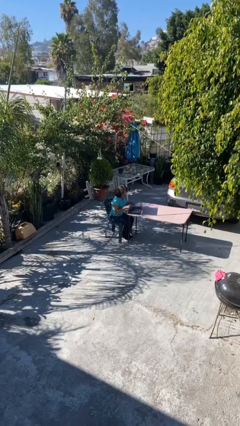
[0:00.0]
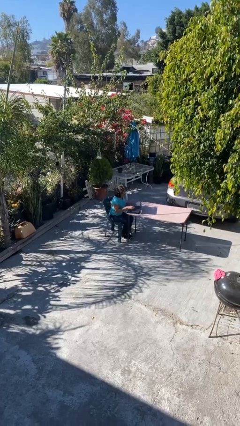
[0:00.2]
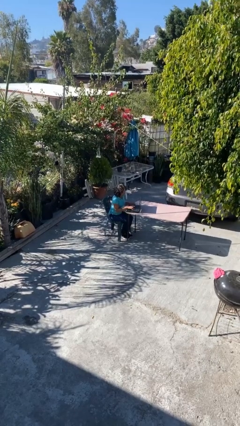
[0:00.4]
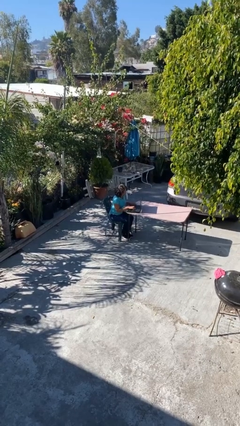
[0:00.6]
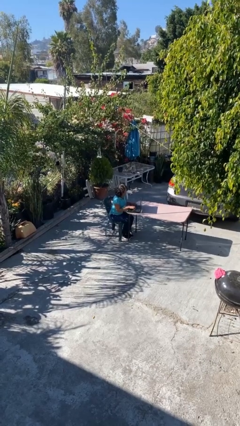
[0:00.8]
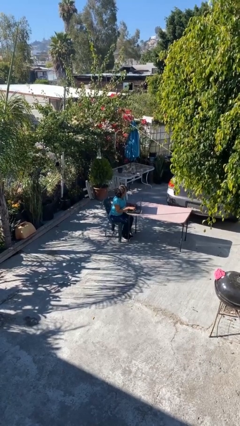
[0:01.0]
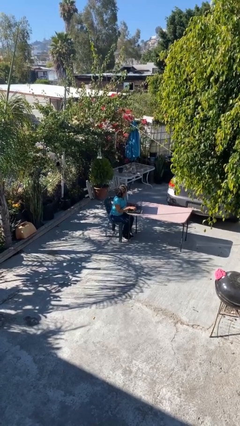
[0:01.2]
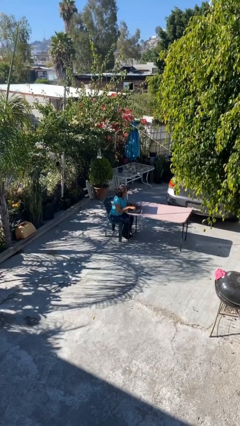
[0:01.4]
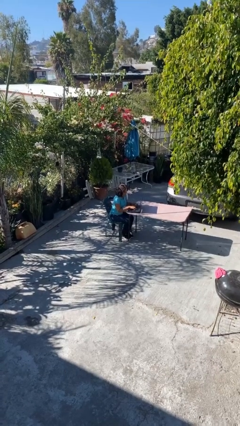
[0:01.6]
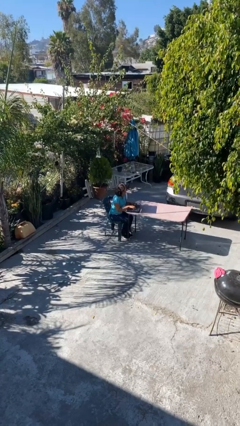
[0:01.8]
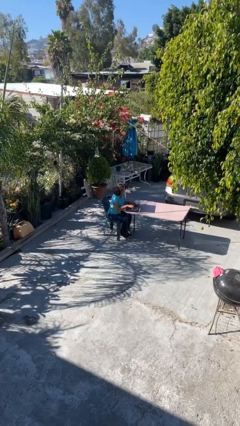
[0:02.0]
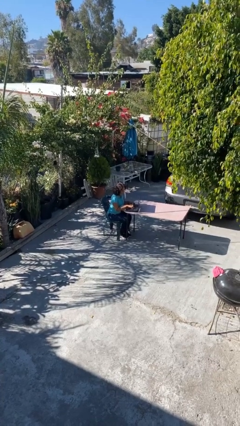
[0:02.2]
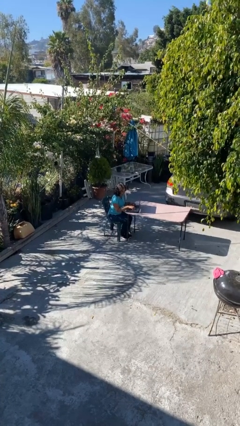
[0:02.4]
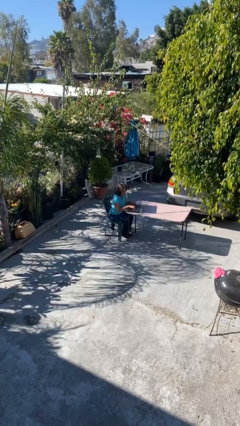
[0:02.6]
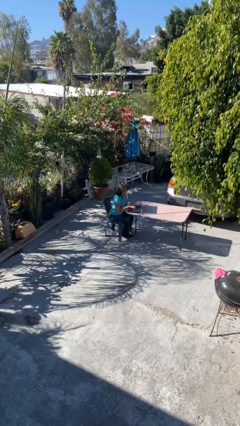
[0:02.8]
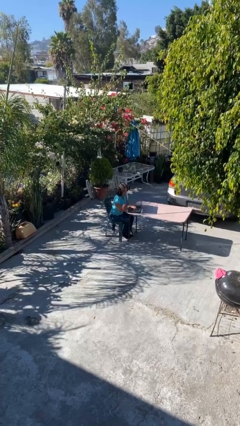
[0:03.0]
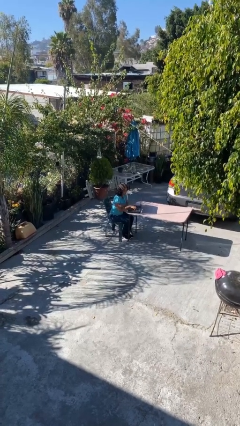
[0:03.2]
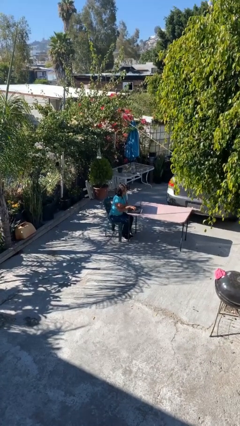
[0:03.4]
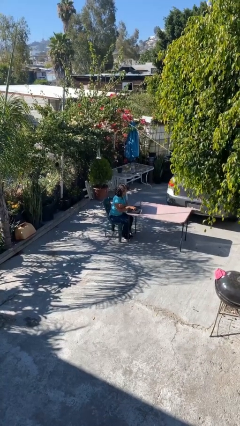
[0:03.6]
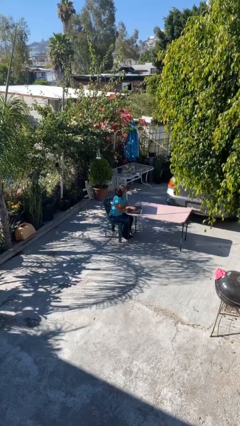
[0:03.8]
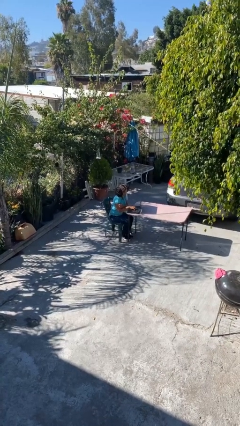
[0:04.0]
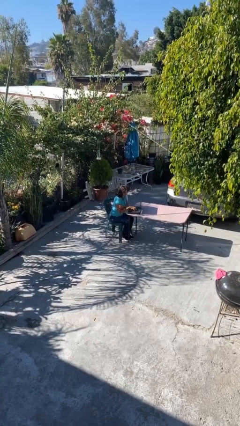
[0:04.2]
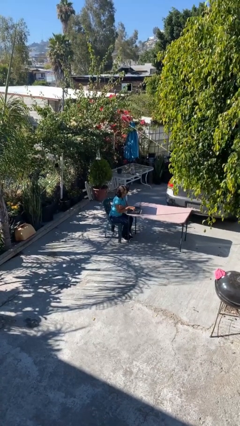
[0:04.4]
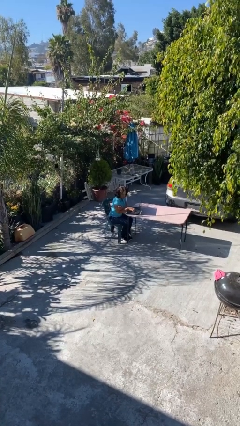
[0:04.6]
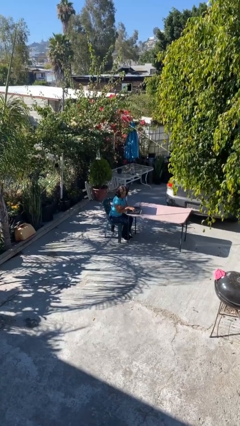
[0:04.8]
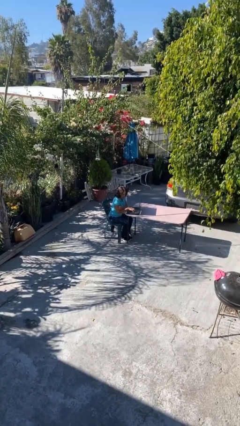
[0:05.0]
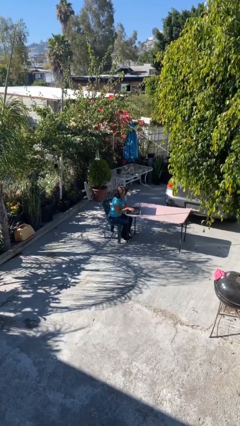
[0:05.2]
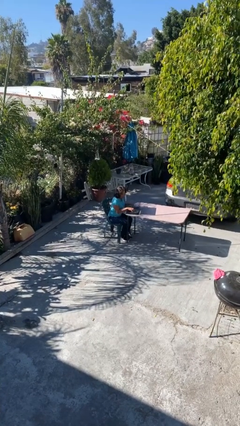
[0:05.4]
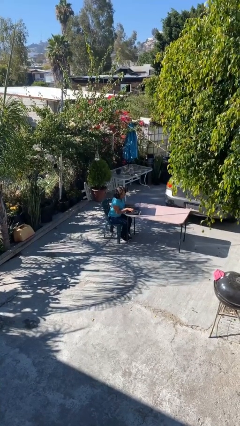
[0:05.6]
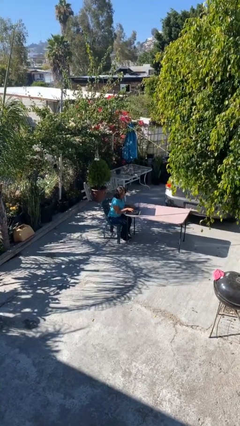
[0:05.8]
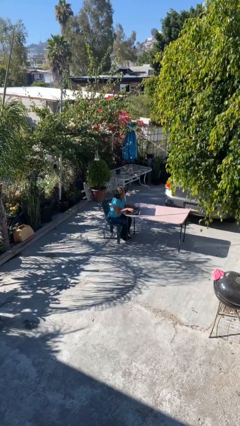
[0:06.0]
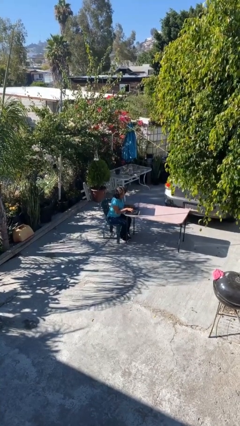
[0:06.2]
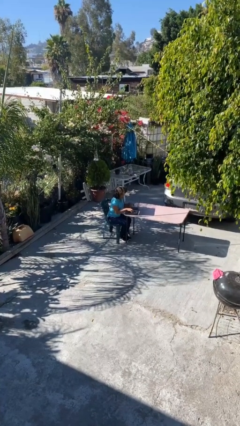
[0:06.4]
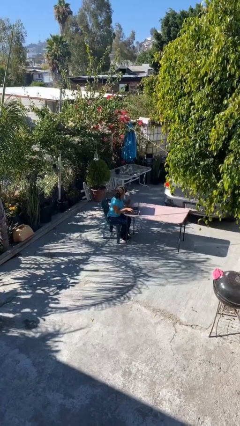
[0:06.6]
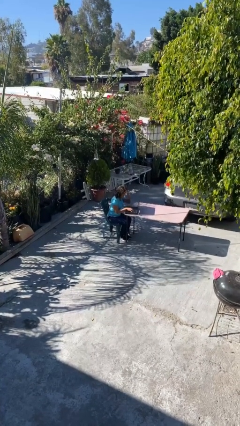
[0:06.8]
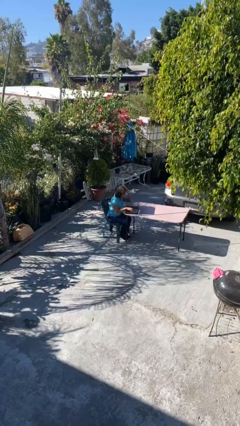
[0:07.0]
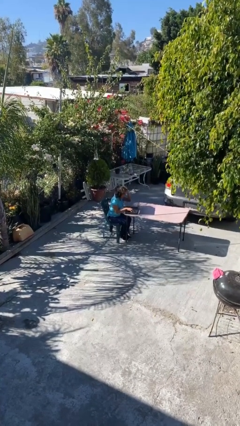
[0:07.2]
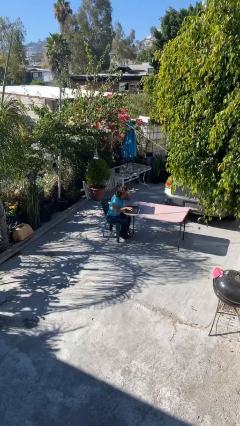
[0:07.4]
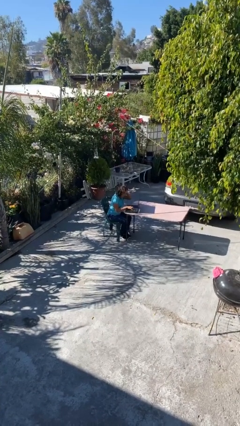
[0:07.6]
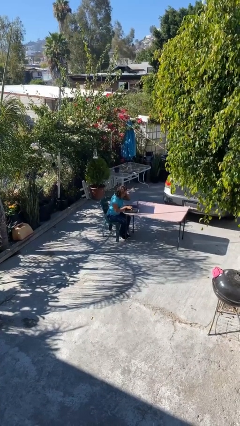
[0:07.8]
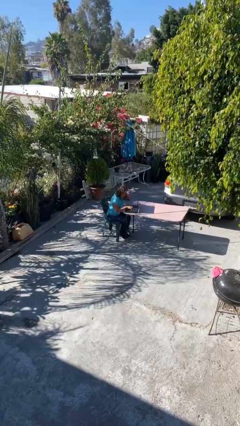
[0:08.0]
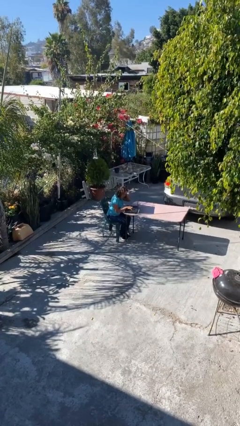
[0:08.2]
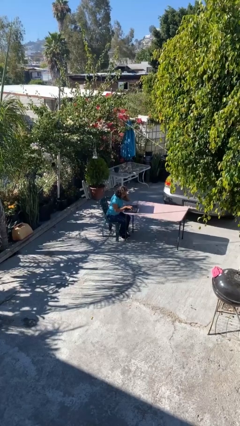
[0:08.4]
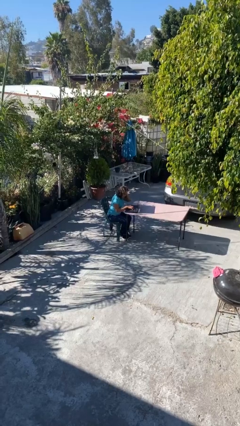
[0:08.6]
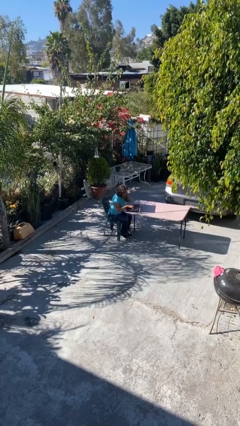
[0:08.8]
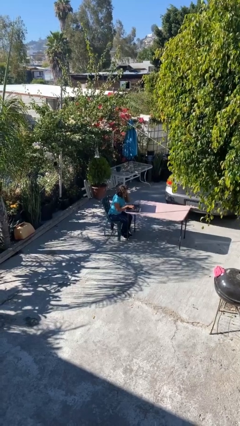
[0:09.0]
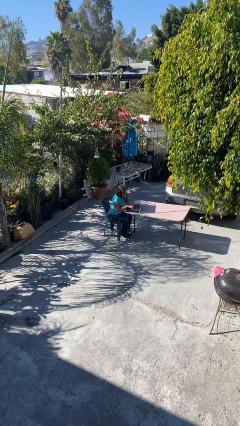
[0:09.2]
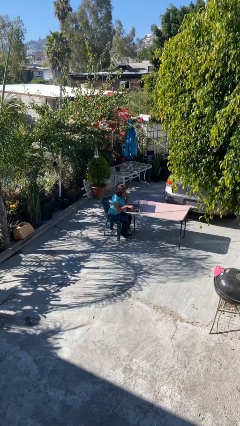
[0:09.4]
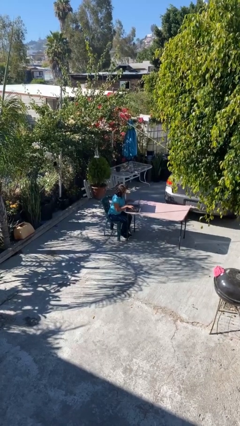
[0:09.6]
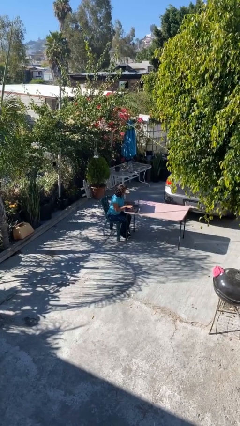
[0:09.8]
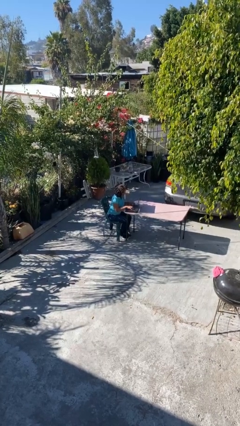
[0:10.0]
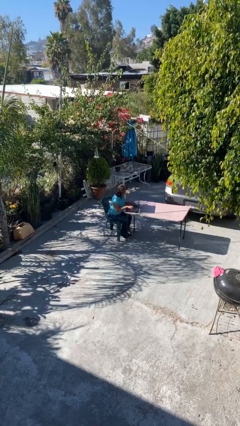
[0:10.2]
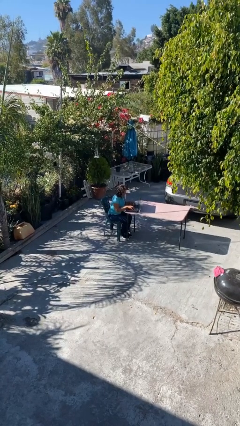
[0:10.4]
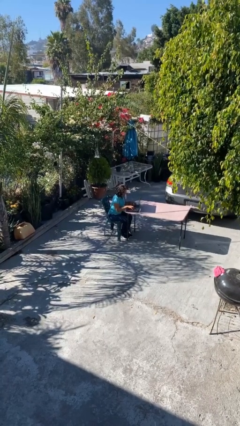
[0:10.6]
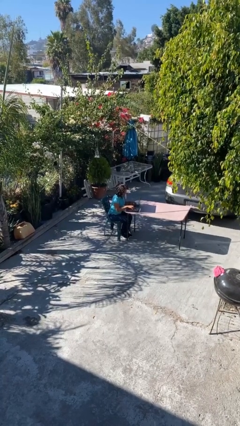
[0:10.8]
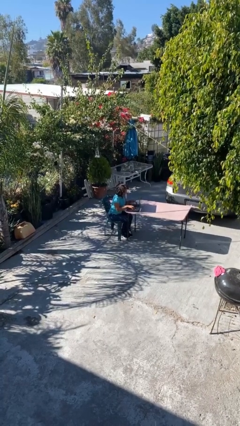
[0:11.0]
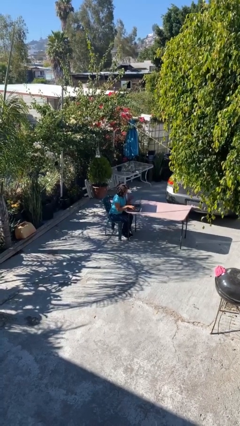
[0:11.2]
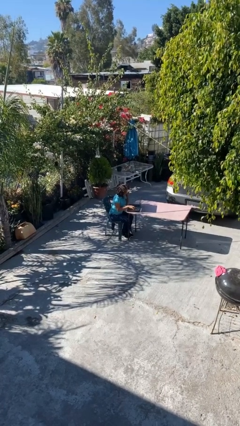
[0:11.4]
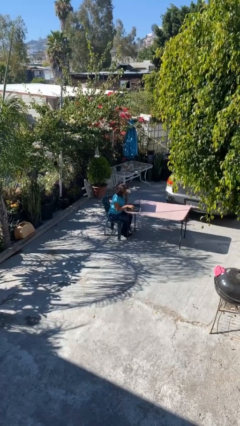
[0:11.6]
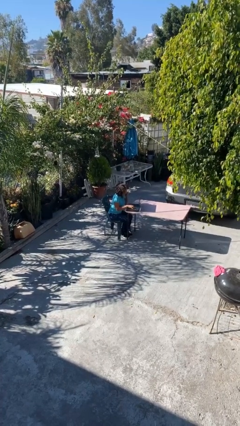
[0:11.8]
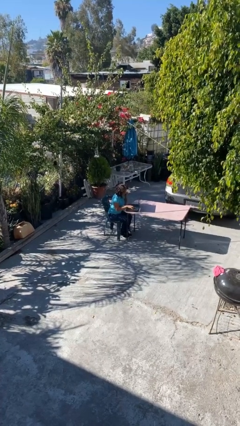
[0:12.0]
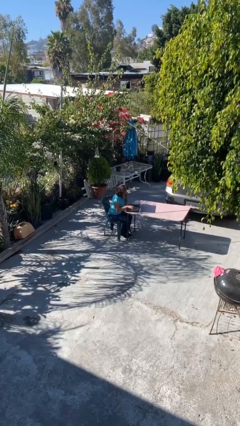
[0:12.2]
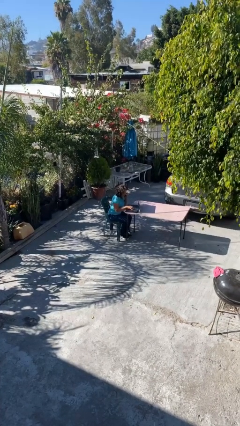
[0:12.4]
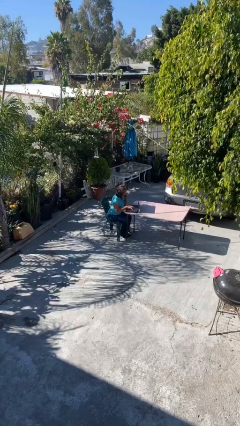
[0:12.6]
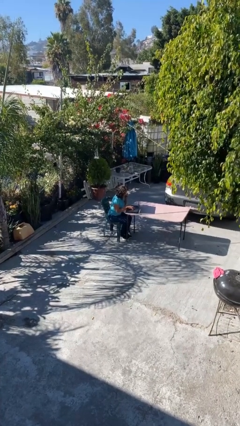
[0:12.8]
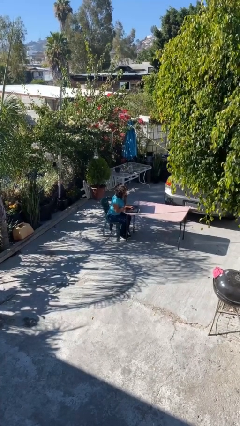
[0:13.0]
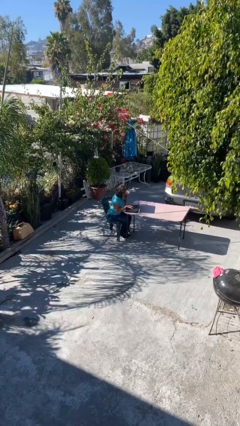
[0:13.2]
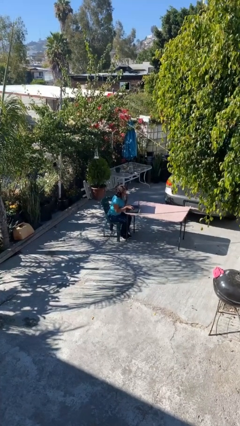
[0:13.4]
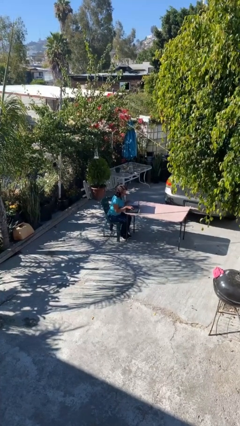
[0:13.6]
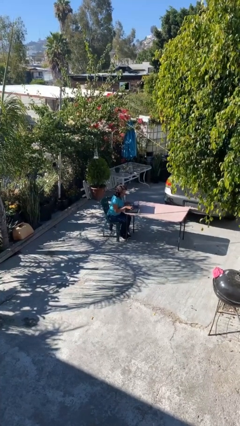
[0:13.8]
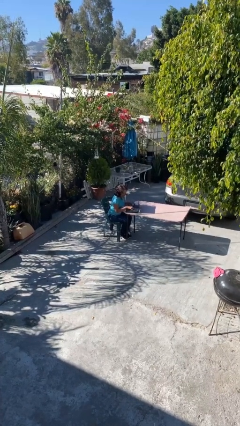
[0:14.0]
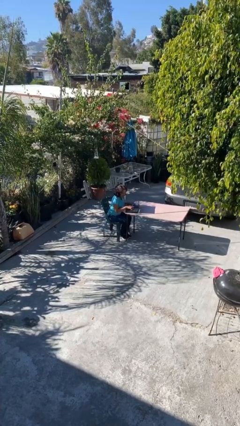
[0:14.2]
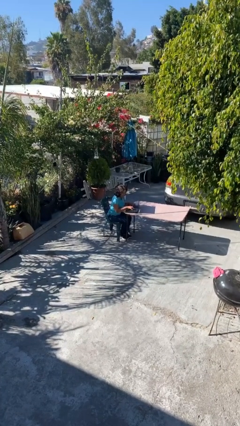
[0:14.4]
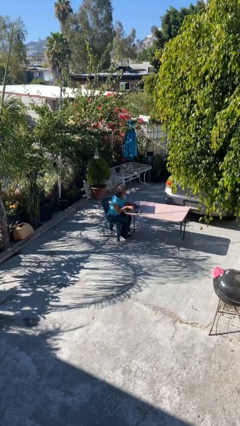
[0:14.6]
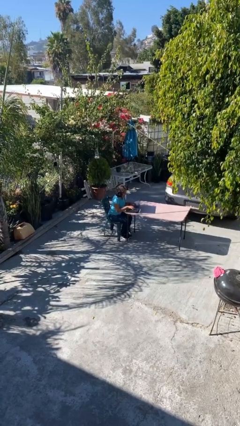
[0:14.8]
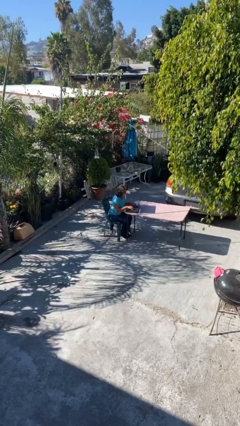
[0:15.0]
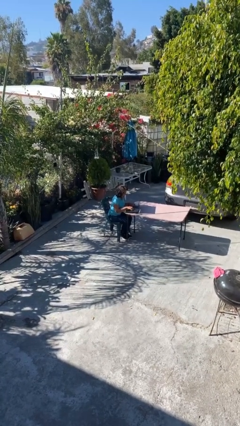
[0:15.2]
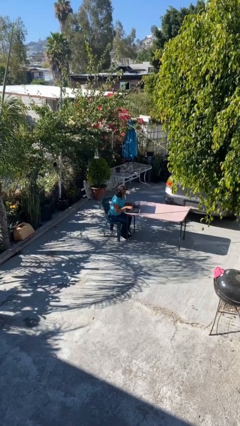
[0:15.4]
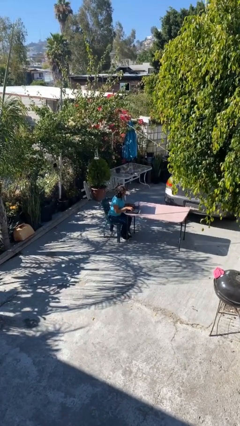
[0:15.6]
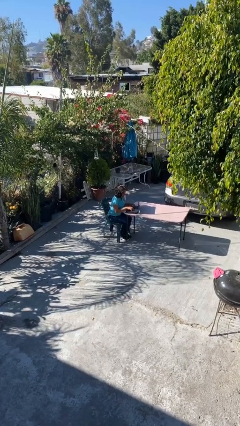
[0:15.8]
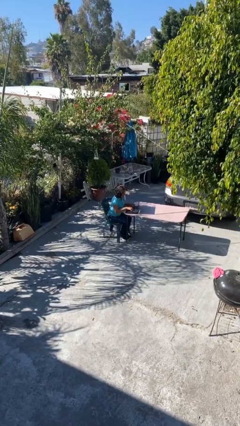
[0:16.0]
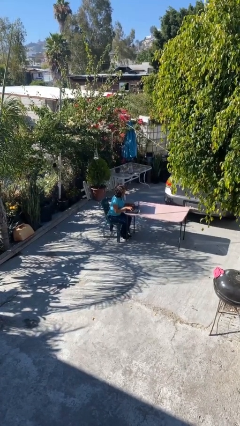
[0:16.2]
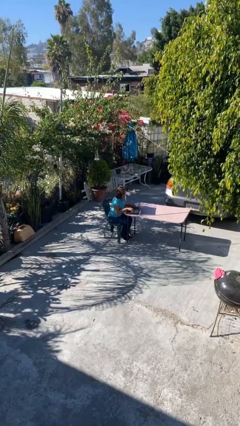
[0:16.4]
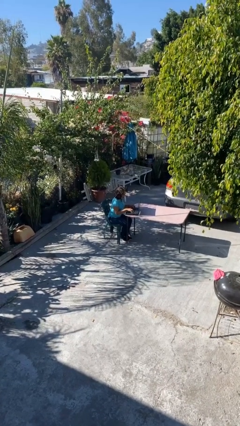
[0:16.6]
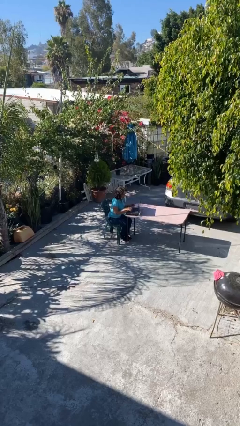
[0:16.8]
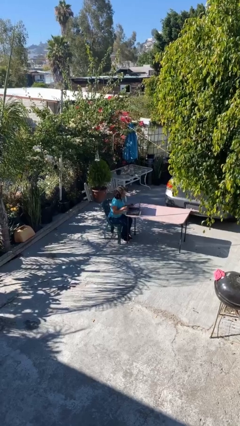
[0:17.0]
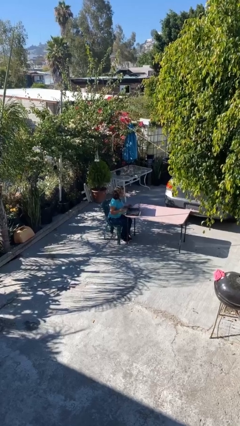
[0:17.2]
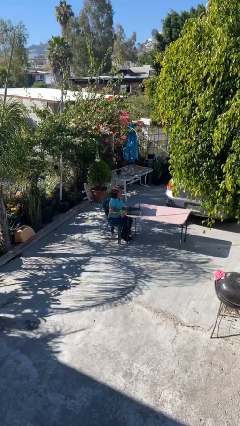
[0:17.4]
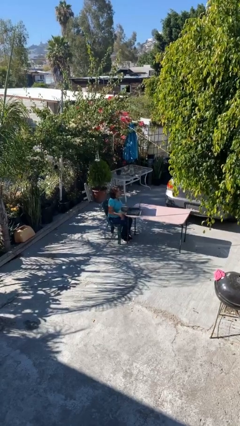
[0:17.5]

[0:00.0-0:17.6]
person interacts with laptop

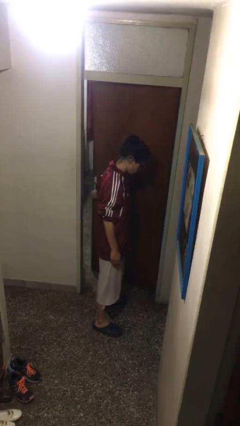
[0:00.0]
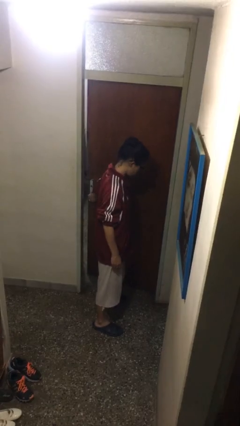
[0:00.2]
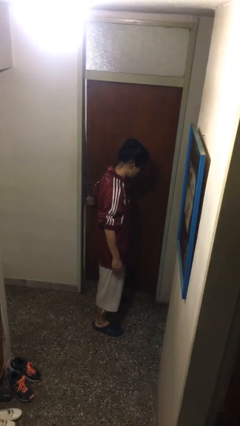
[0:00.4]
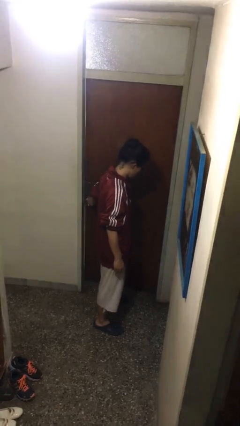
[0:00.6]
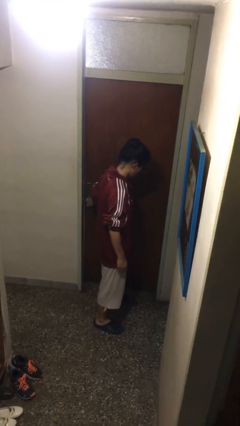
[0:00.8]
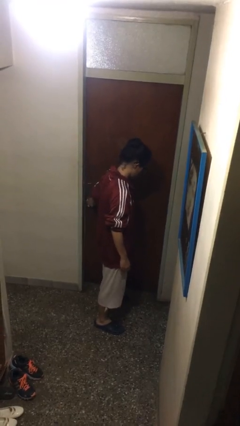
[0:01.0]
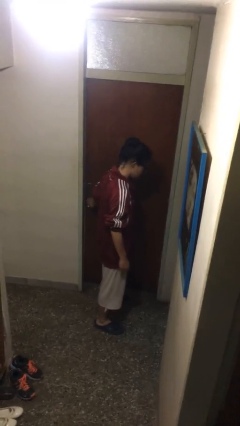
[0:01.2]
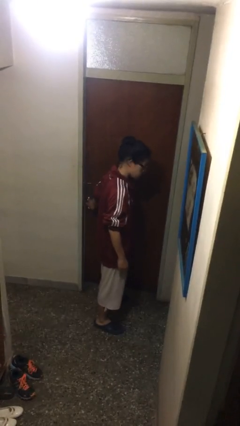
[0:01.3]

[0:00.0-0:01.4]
person closes facility door
